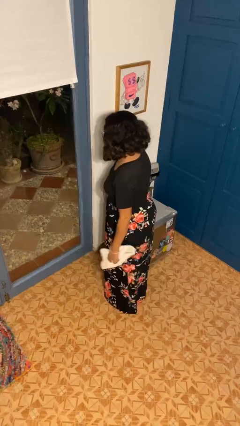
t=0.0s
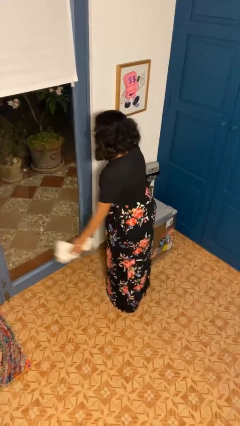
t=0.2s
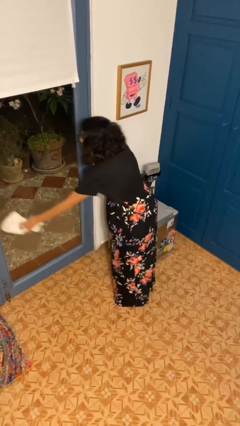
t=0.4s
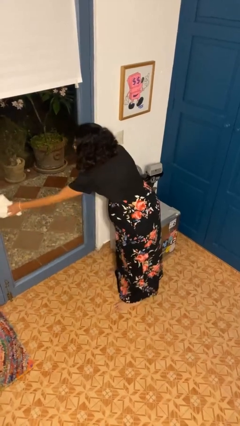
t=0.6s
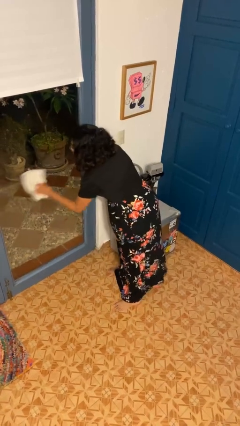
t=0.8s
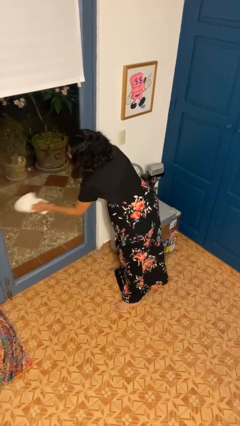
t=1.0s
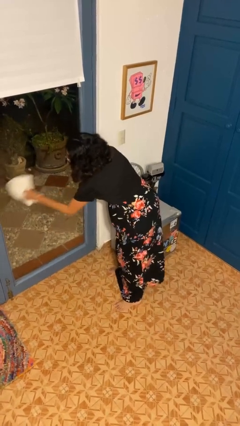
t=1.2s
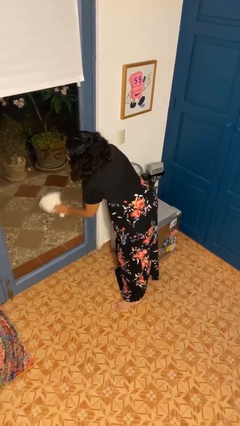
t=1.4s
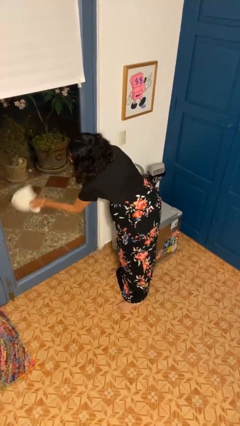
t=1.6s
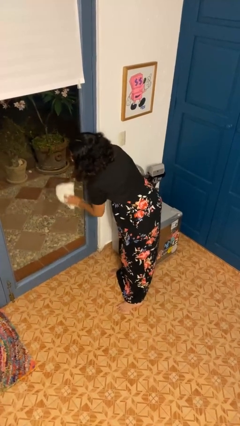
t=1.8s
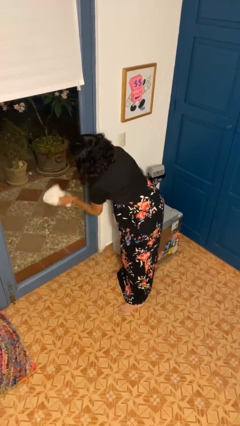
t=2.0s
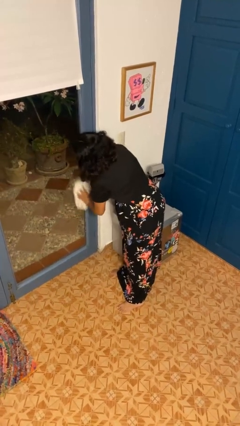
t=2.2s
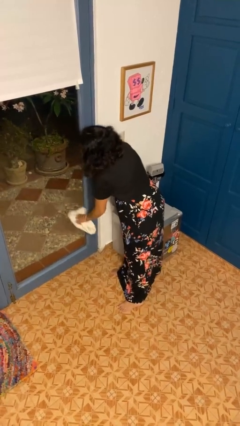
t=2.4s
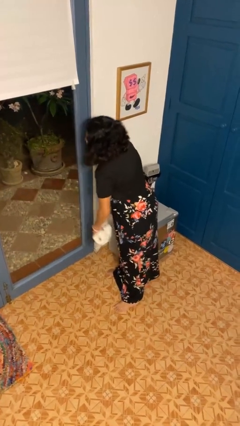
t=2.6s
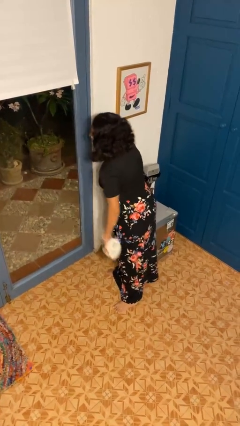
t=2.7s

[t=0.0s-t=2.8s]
person washes window

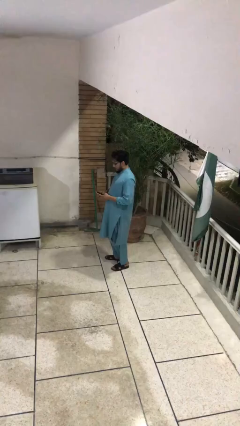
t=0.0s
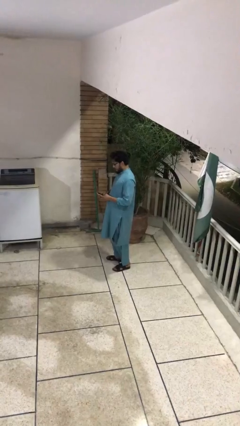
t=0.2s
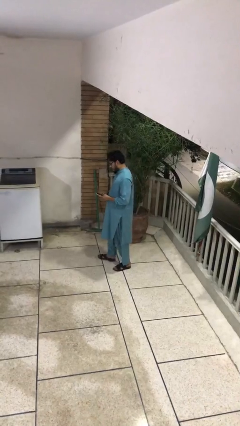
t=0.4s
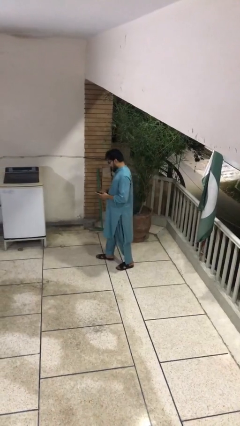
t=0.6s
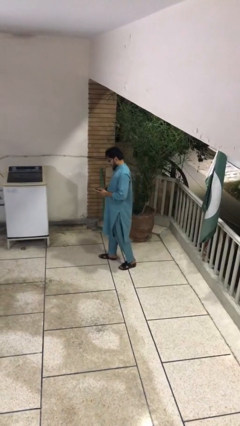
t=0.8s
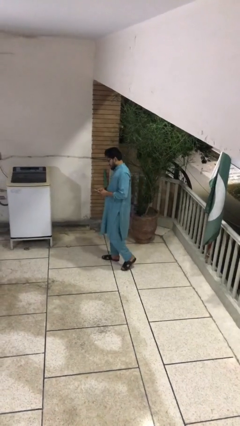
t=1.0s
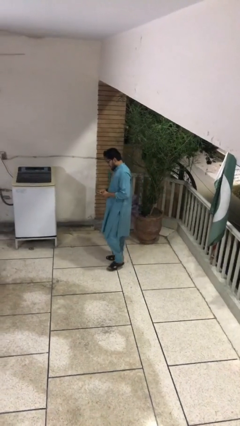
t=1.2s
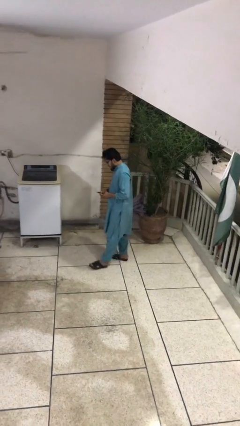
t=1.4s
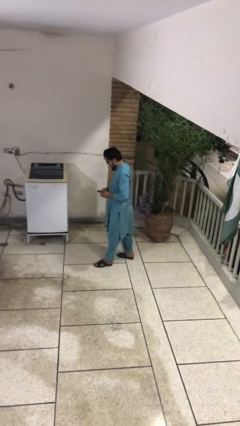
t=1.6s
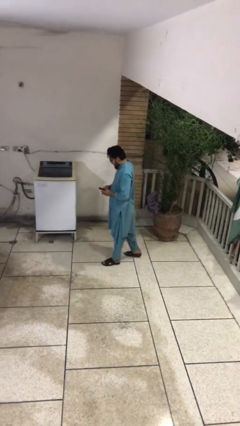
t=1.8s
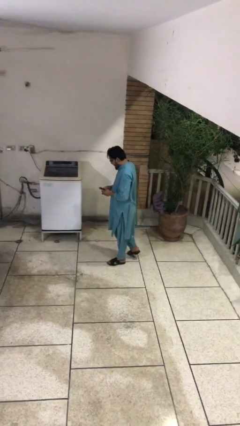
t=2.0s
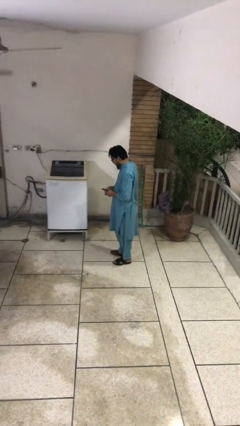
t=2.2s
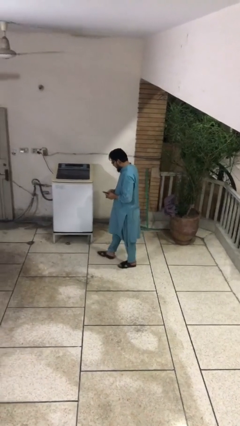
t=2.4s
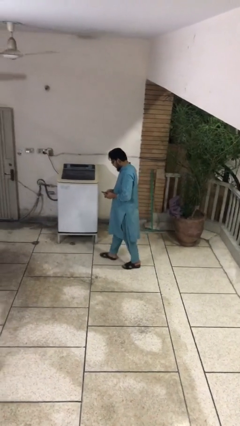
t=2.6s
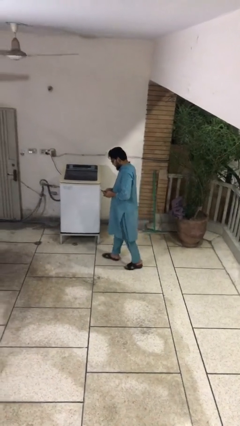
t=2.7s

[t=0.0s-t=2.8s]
person texts on phone

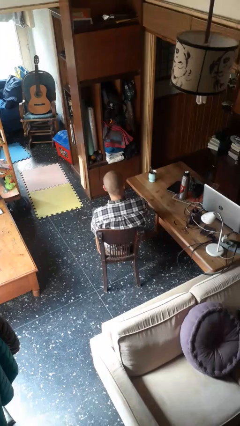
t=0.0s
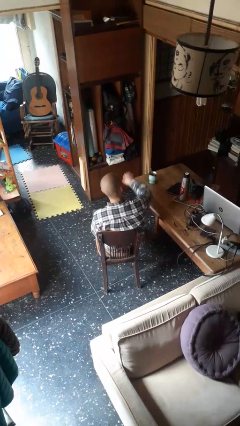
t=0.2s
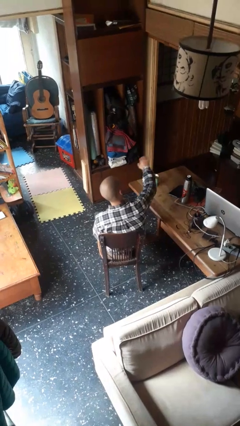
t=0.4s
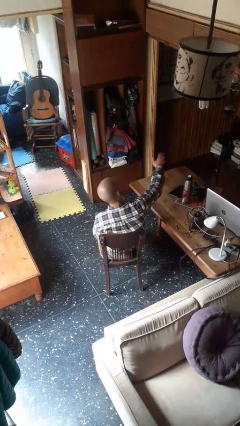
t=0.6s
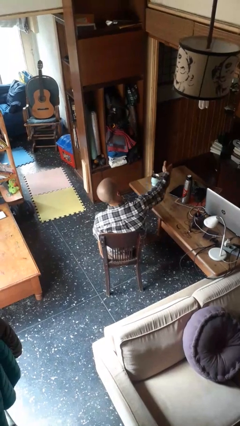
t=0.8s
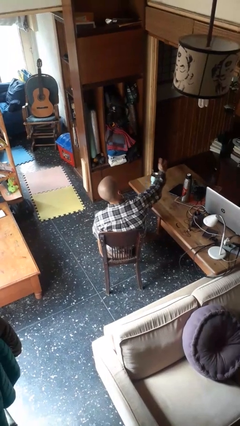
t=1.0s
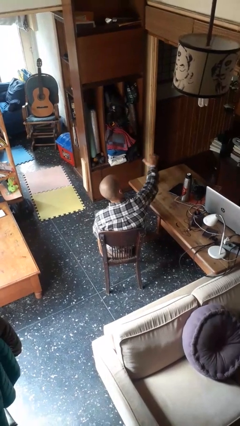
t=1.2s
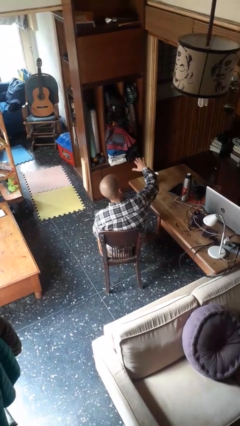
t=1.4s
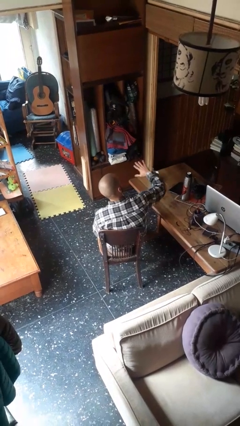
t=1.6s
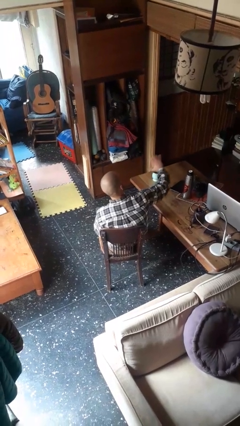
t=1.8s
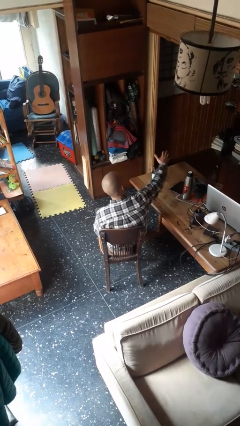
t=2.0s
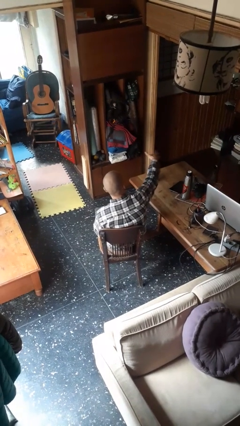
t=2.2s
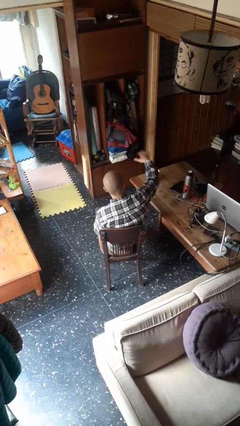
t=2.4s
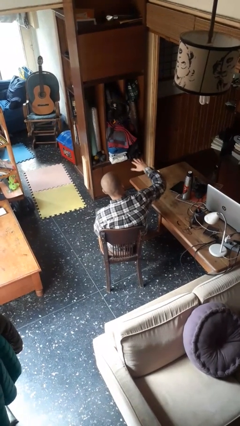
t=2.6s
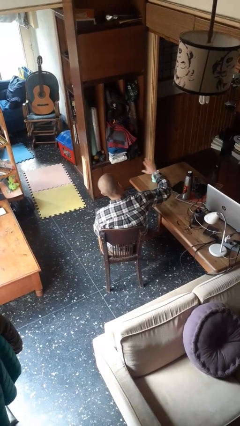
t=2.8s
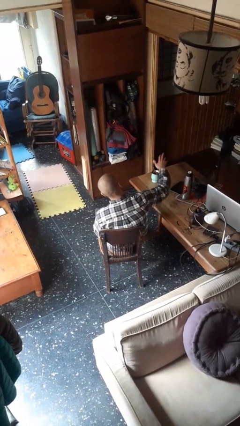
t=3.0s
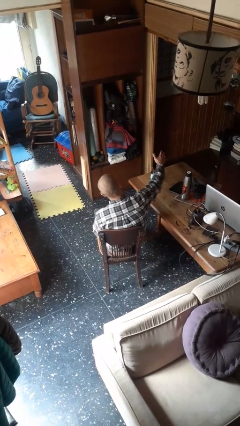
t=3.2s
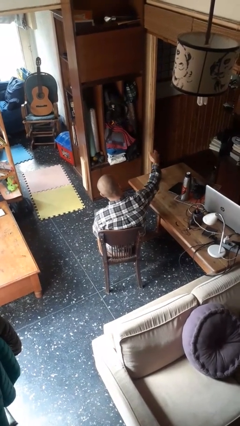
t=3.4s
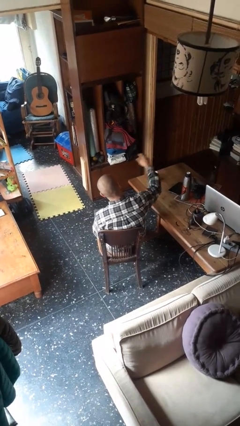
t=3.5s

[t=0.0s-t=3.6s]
person waves hand over object

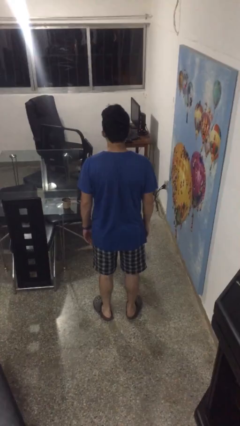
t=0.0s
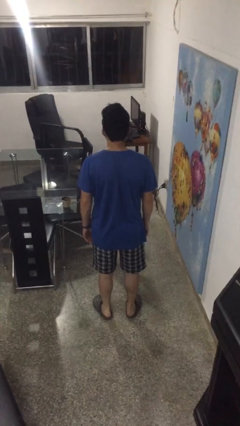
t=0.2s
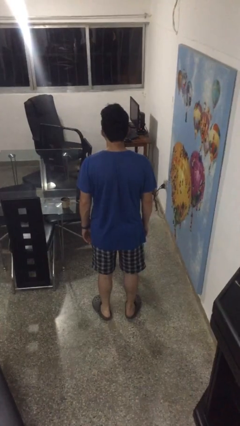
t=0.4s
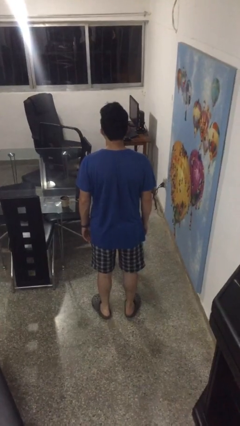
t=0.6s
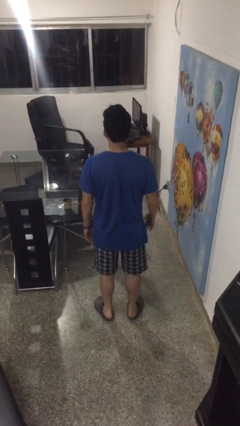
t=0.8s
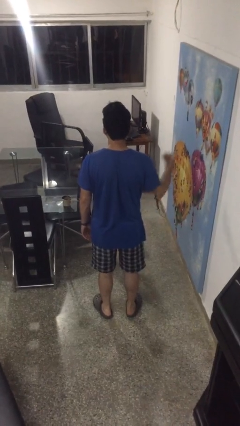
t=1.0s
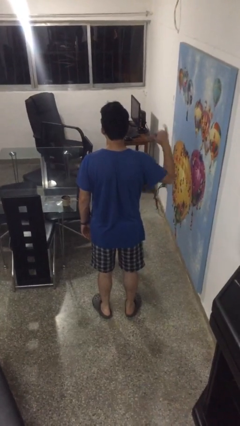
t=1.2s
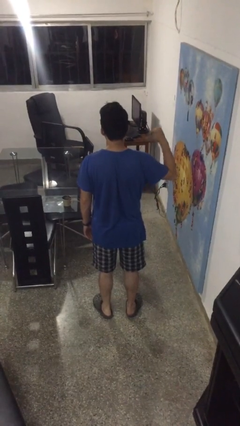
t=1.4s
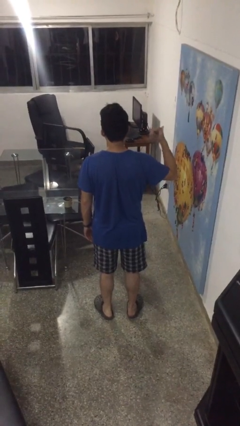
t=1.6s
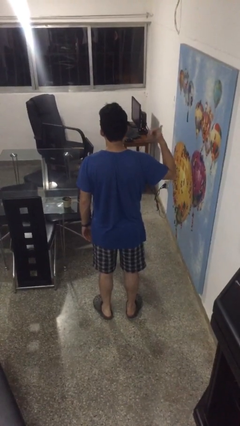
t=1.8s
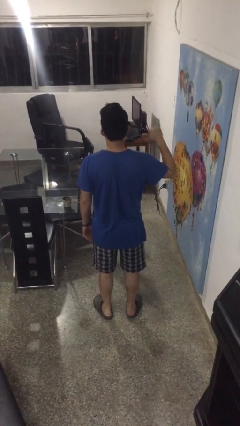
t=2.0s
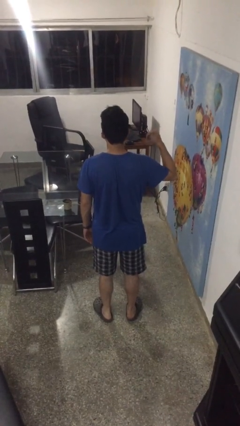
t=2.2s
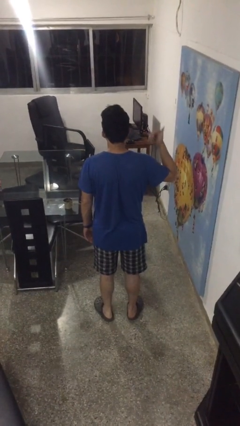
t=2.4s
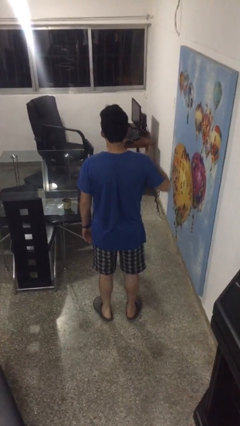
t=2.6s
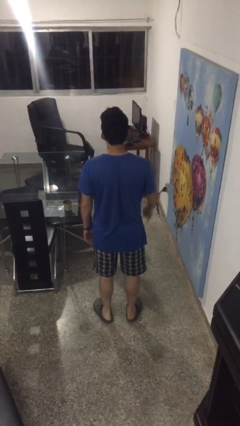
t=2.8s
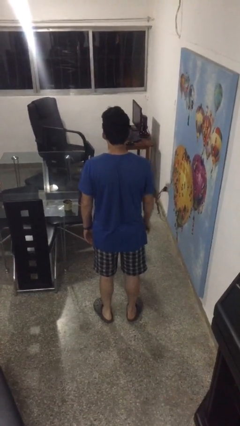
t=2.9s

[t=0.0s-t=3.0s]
person gestures hang loose

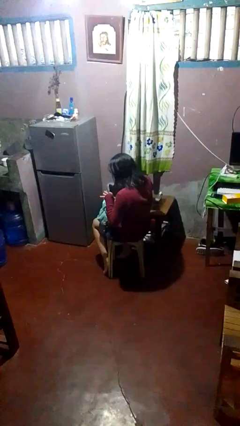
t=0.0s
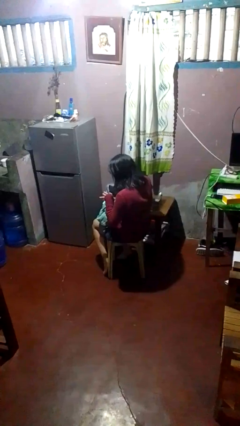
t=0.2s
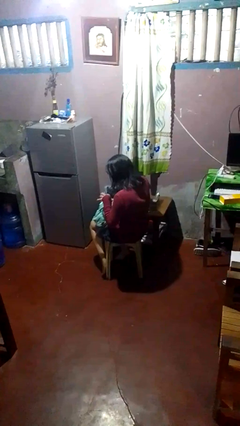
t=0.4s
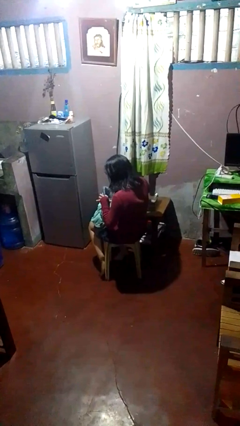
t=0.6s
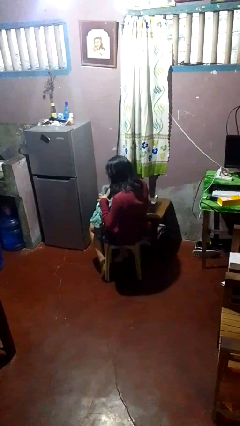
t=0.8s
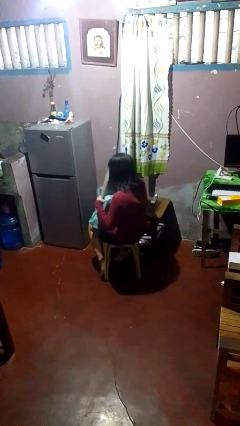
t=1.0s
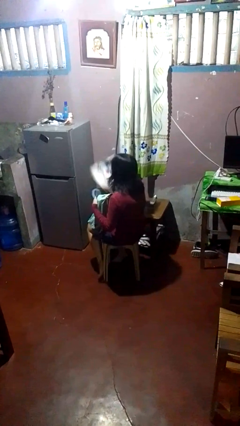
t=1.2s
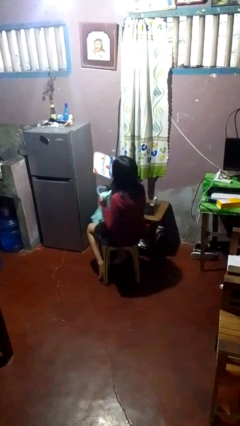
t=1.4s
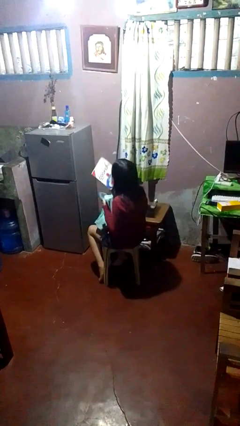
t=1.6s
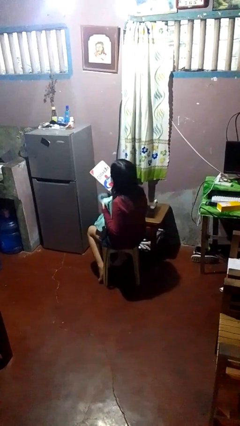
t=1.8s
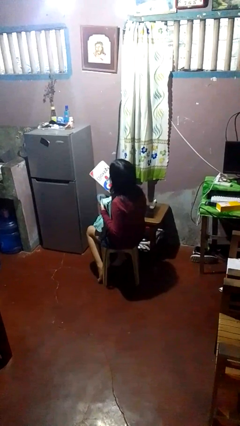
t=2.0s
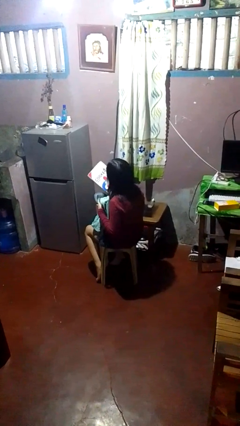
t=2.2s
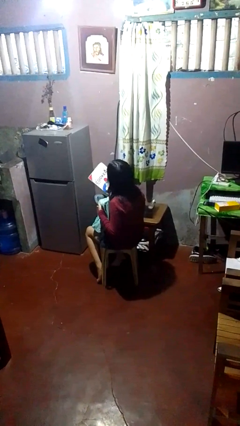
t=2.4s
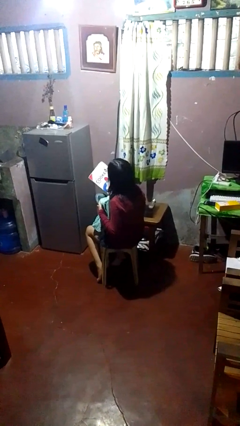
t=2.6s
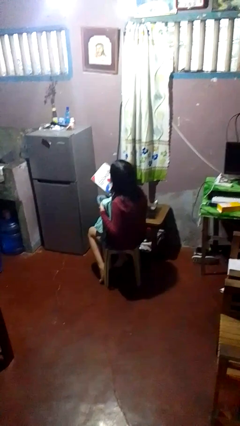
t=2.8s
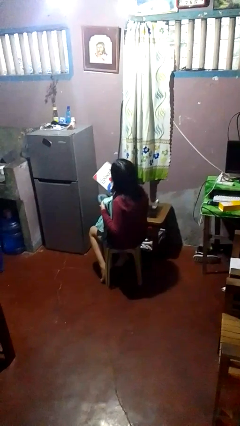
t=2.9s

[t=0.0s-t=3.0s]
person takes object from backpack

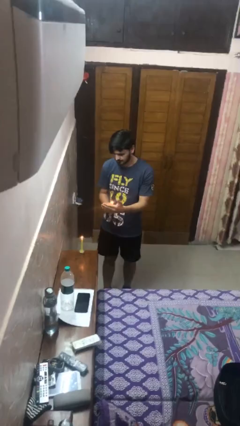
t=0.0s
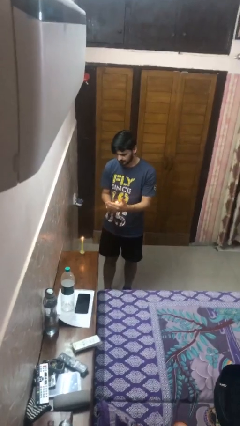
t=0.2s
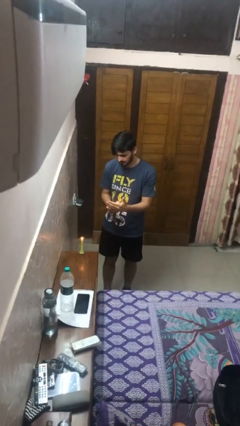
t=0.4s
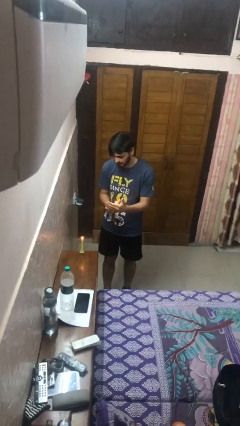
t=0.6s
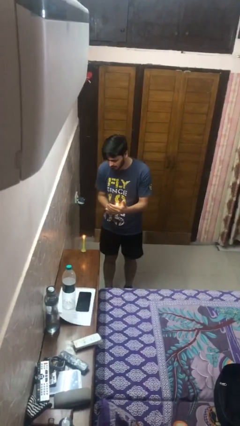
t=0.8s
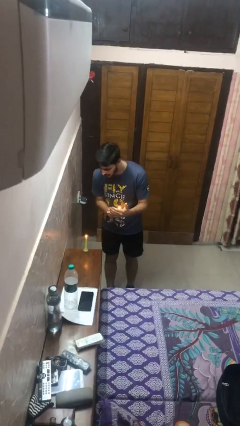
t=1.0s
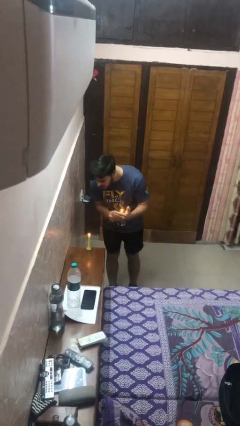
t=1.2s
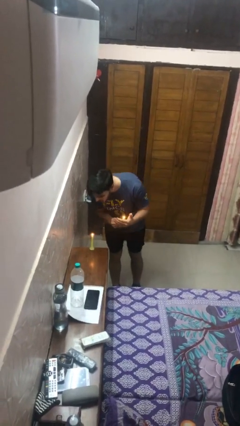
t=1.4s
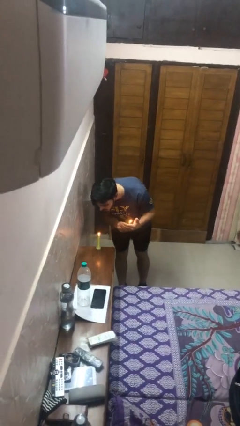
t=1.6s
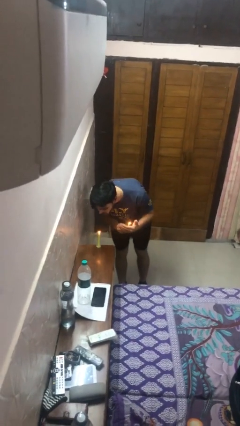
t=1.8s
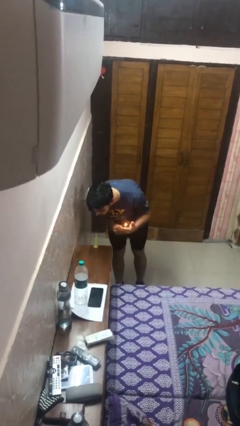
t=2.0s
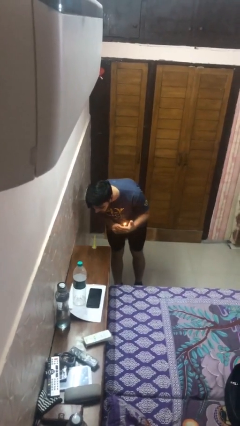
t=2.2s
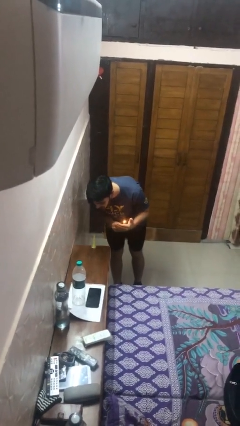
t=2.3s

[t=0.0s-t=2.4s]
person extinguishes candle
